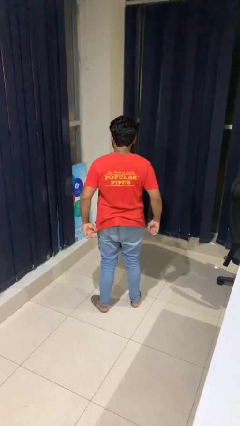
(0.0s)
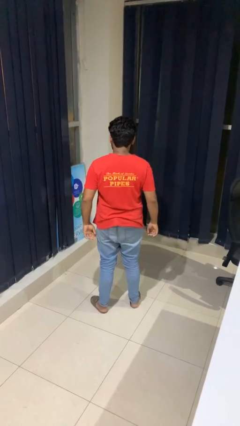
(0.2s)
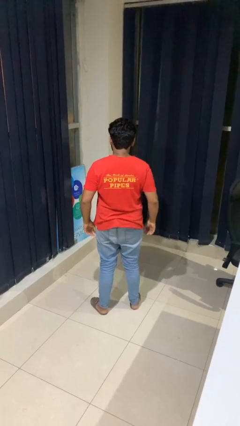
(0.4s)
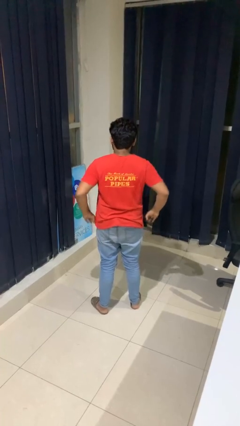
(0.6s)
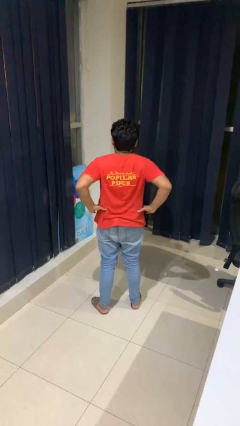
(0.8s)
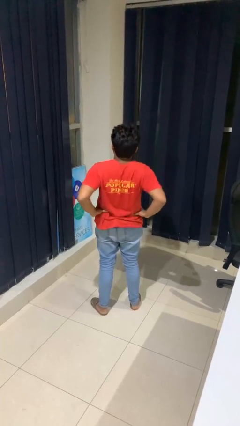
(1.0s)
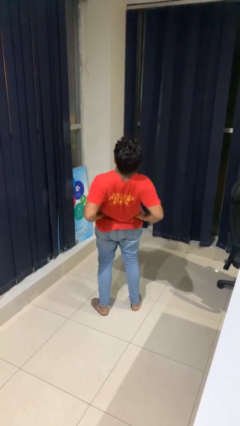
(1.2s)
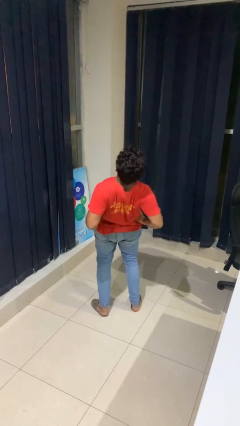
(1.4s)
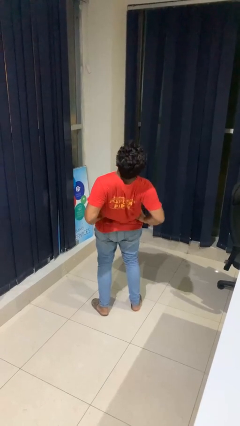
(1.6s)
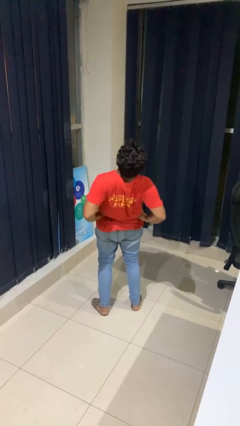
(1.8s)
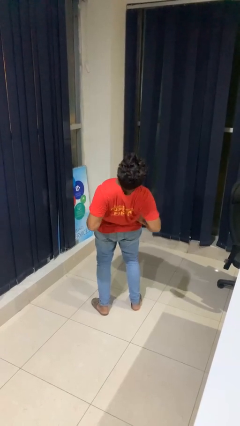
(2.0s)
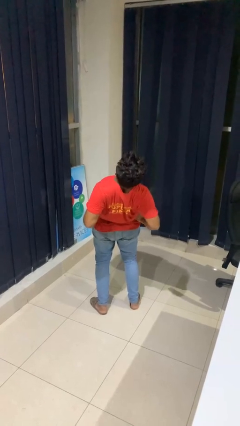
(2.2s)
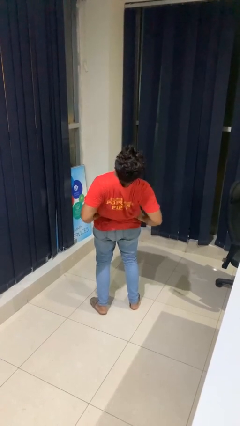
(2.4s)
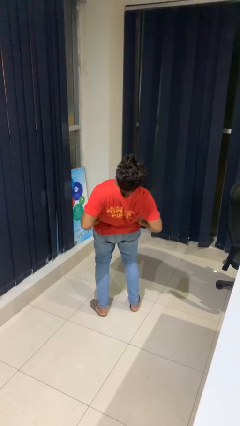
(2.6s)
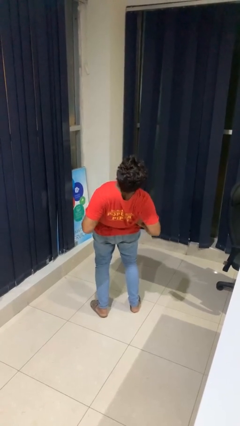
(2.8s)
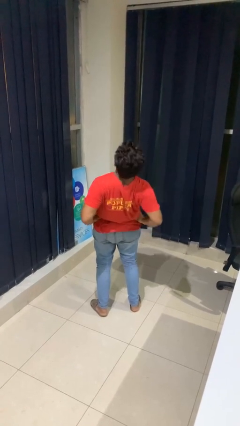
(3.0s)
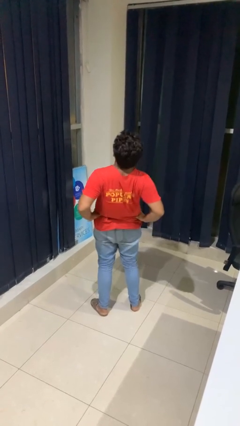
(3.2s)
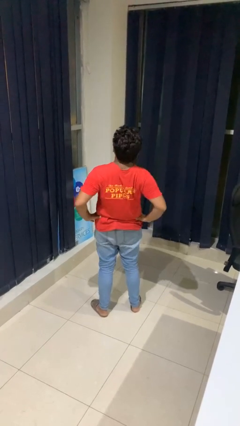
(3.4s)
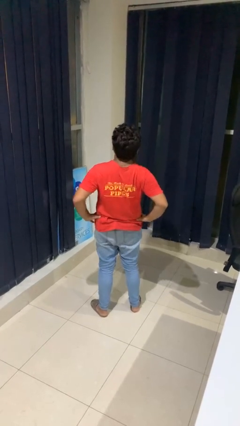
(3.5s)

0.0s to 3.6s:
person stretches back

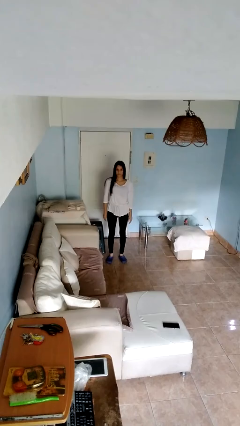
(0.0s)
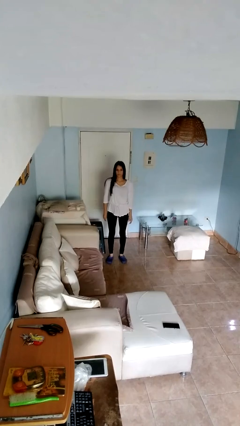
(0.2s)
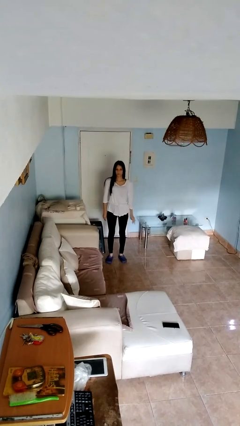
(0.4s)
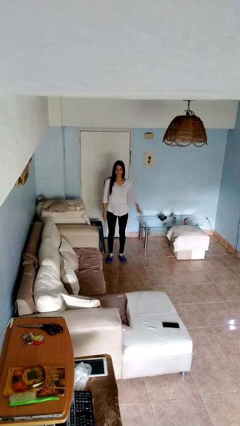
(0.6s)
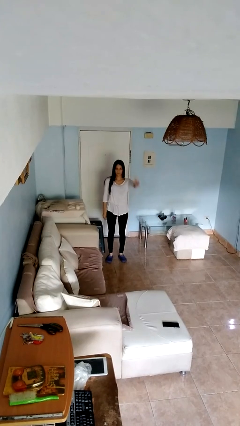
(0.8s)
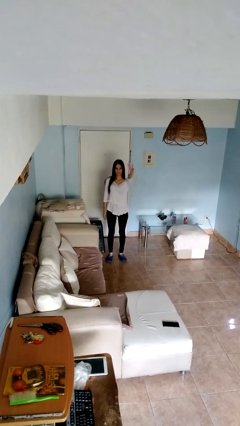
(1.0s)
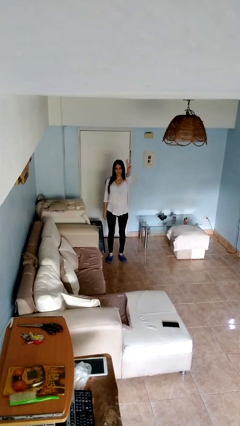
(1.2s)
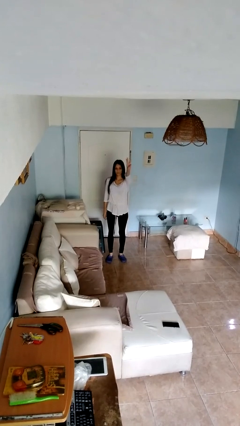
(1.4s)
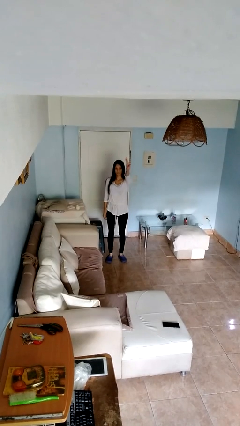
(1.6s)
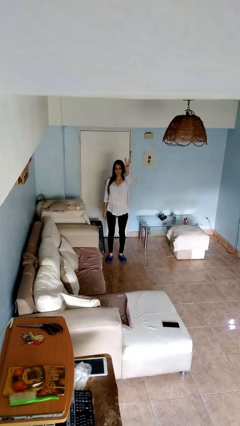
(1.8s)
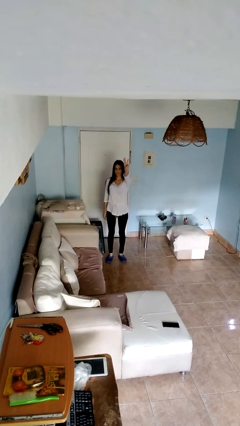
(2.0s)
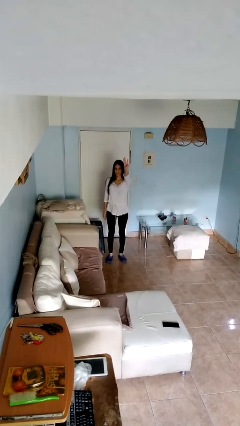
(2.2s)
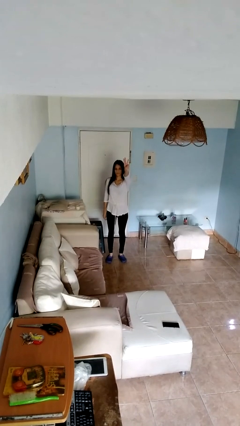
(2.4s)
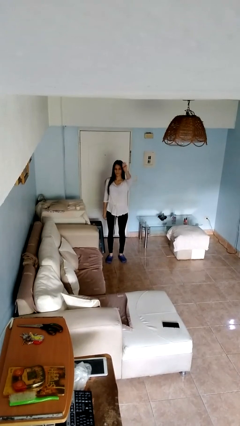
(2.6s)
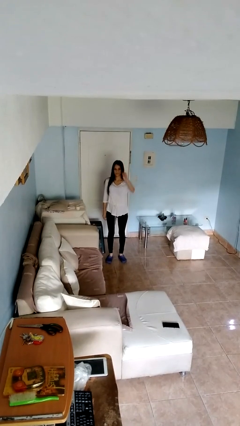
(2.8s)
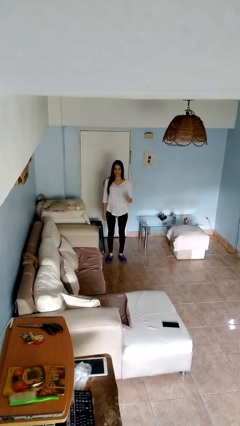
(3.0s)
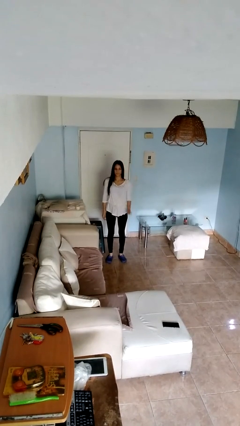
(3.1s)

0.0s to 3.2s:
person gestures number three

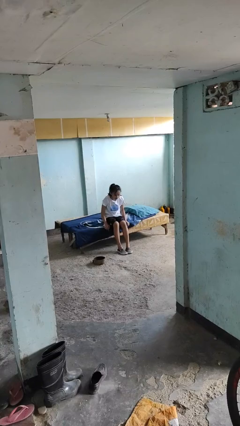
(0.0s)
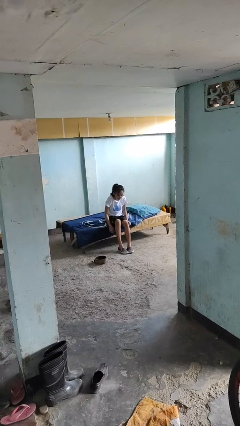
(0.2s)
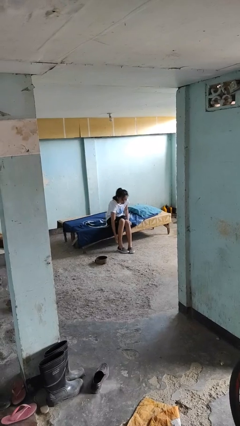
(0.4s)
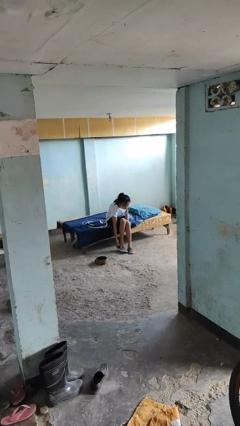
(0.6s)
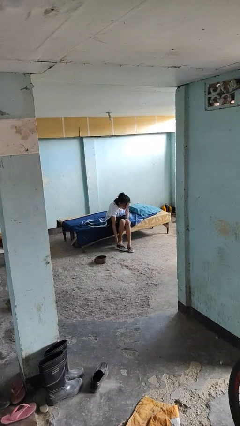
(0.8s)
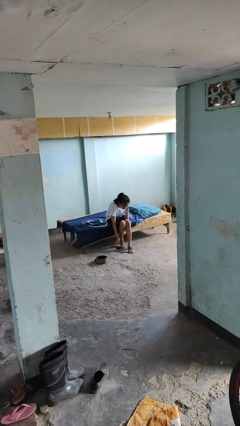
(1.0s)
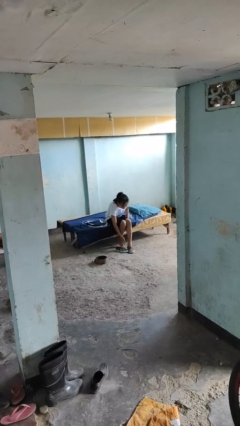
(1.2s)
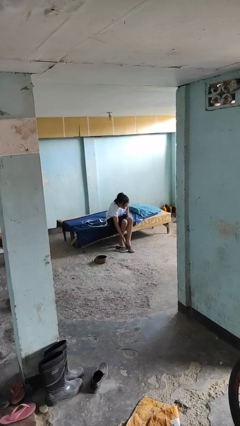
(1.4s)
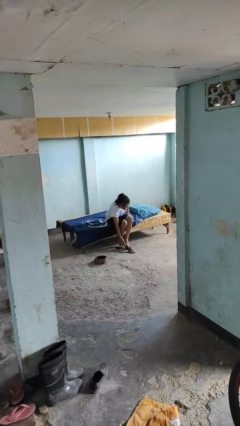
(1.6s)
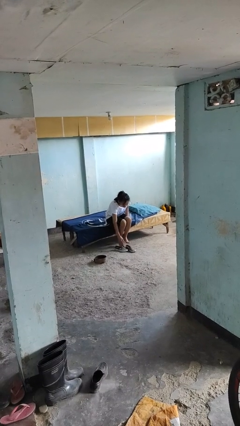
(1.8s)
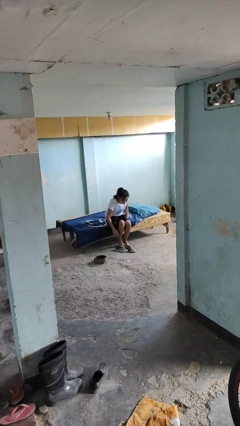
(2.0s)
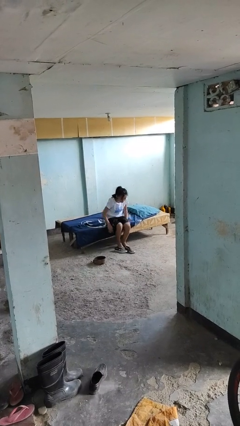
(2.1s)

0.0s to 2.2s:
person takes off shoes

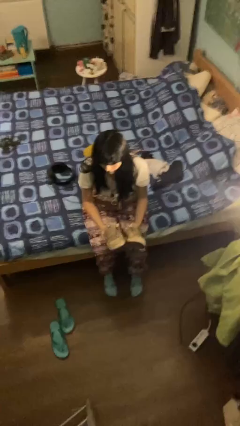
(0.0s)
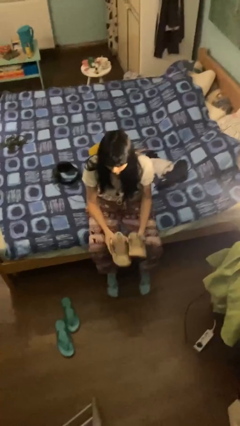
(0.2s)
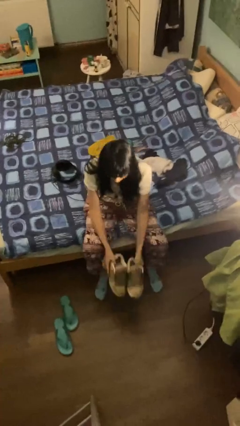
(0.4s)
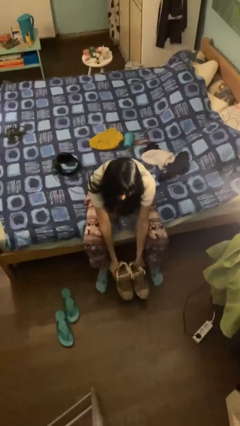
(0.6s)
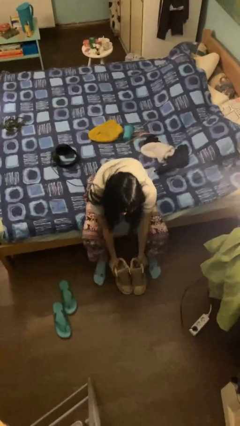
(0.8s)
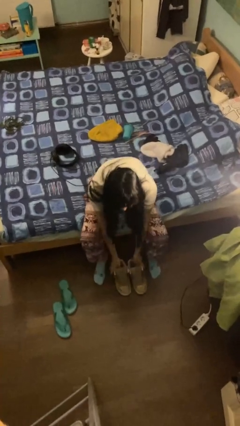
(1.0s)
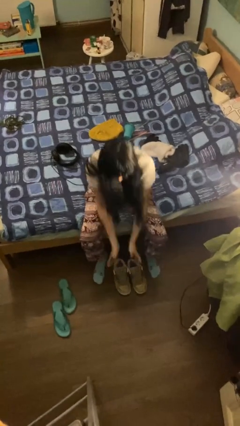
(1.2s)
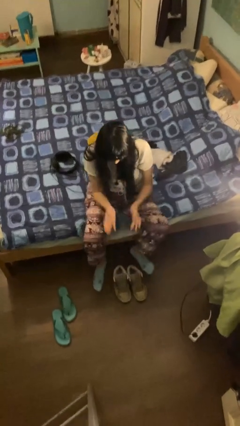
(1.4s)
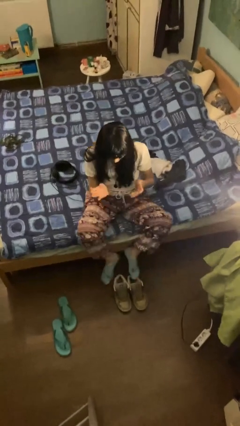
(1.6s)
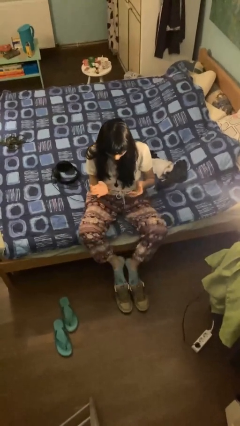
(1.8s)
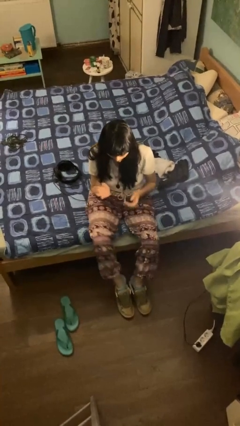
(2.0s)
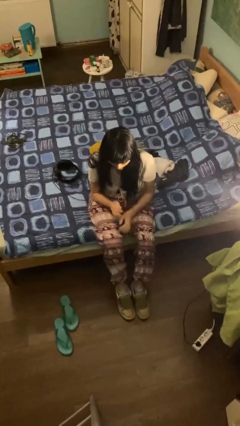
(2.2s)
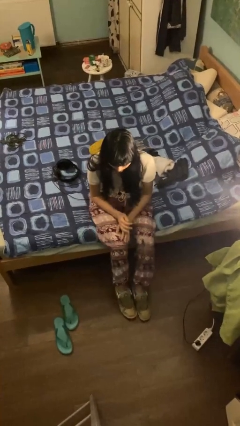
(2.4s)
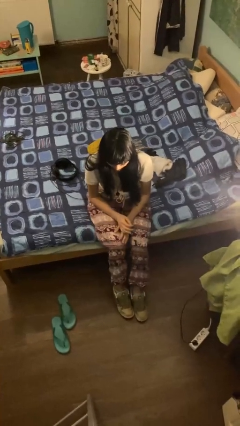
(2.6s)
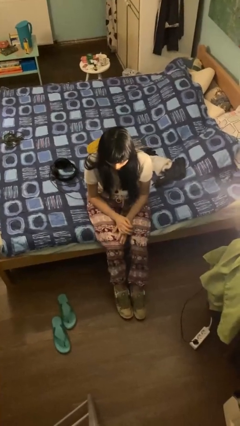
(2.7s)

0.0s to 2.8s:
person puts on shoes

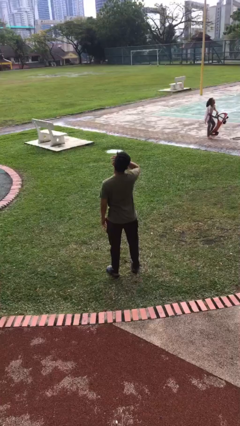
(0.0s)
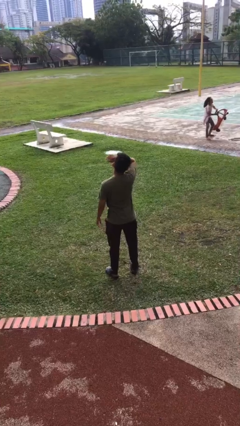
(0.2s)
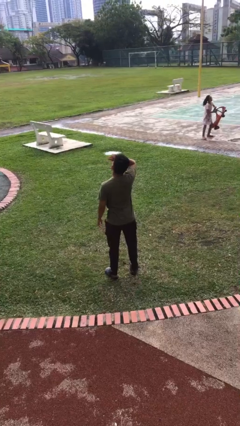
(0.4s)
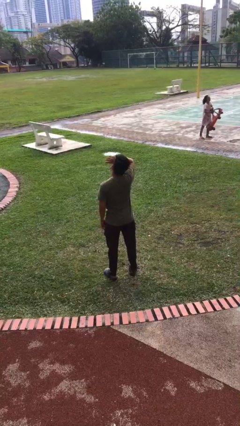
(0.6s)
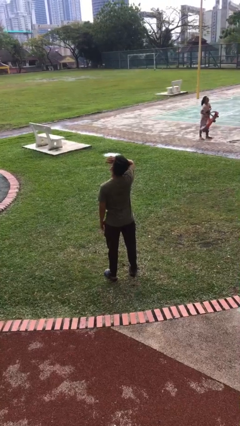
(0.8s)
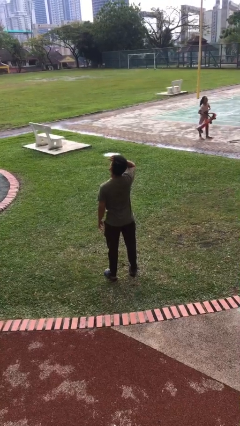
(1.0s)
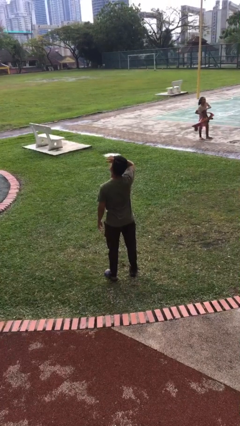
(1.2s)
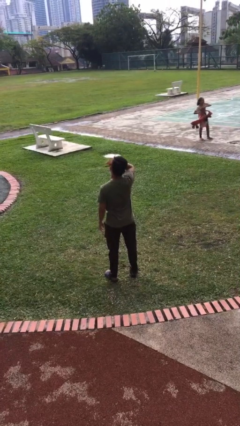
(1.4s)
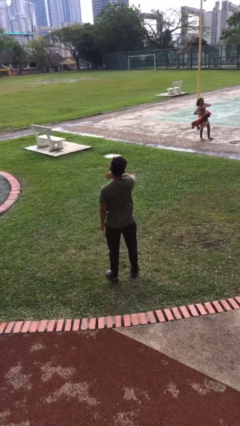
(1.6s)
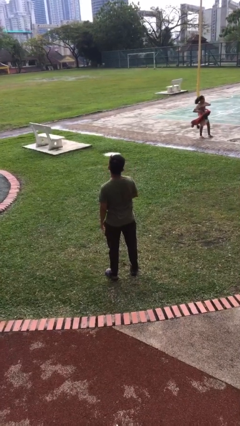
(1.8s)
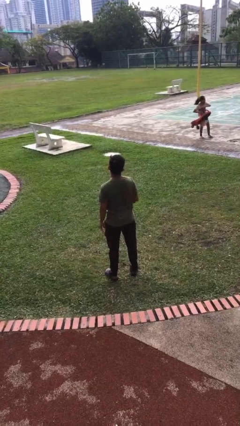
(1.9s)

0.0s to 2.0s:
person rubs eyes

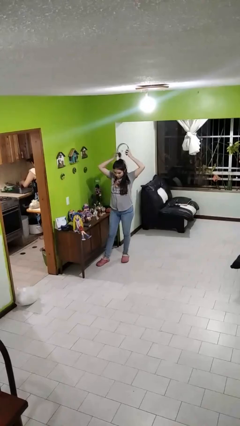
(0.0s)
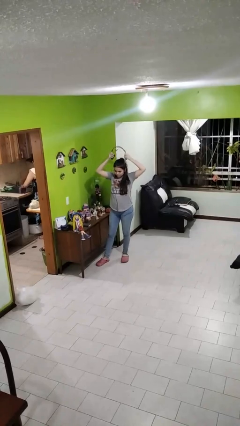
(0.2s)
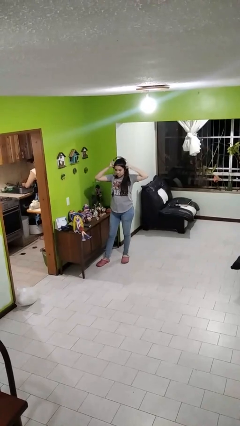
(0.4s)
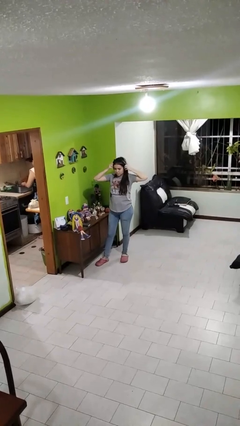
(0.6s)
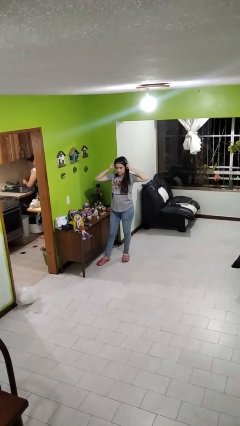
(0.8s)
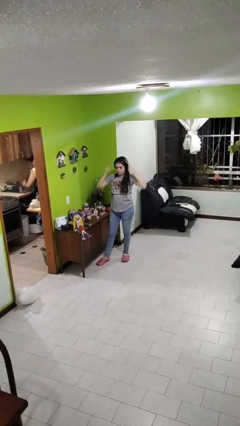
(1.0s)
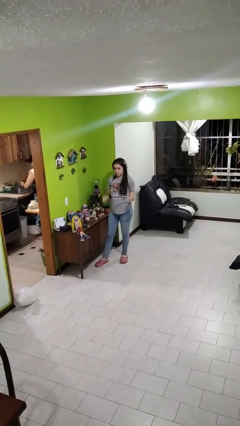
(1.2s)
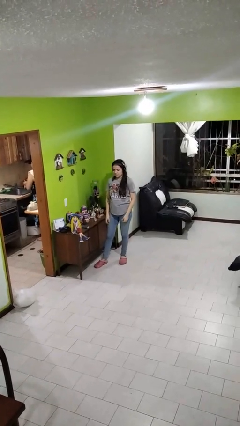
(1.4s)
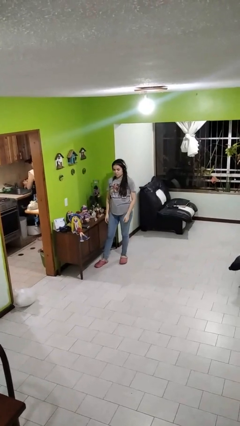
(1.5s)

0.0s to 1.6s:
person puts on headphones

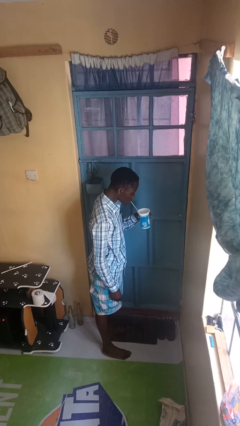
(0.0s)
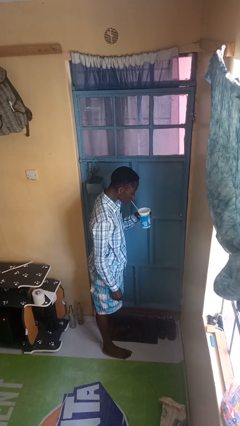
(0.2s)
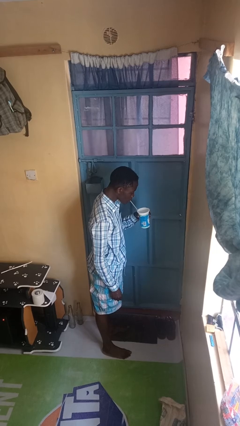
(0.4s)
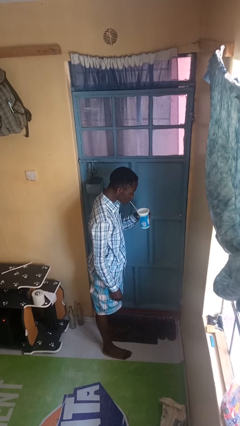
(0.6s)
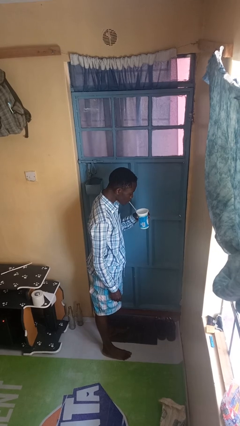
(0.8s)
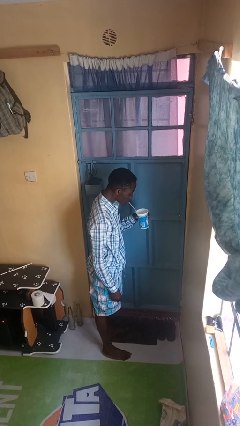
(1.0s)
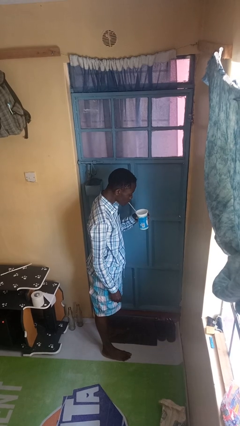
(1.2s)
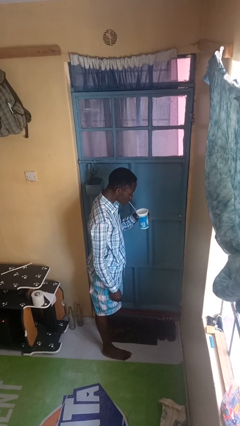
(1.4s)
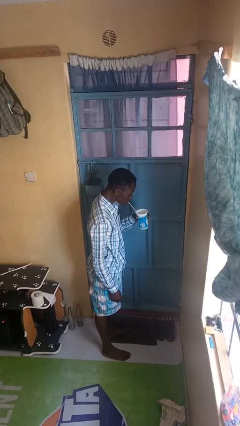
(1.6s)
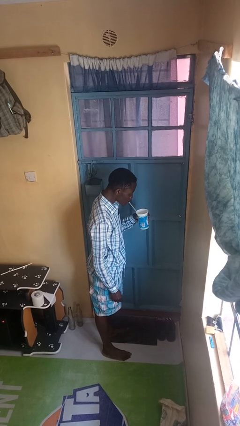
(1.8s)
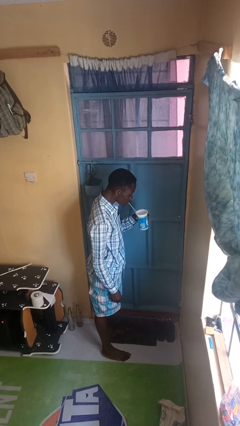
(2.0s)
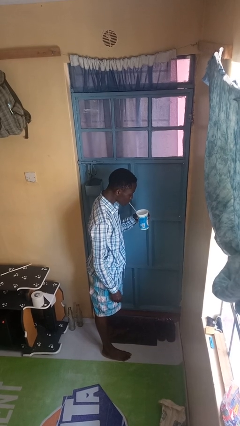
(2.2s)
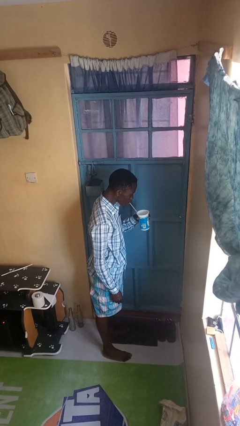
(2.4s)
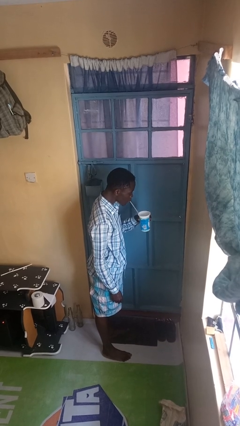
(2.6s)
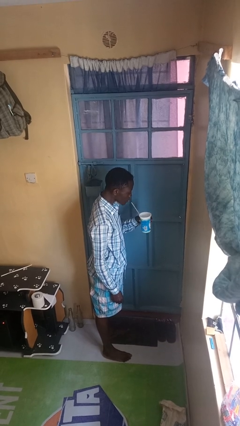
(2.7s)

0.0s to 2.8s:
person drinks from straw
